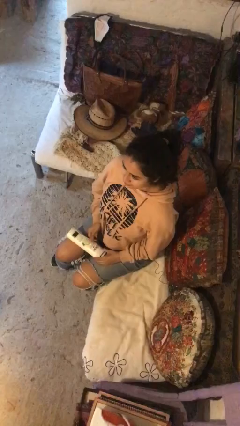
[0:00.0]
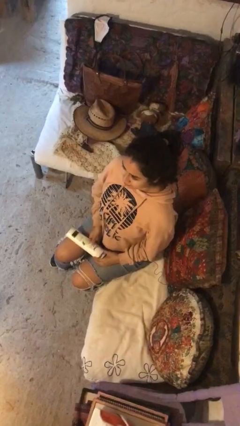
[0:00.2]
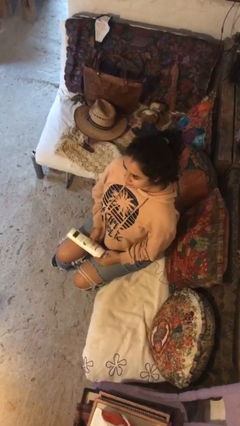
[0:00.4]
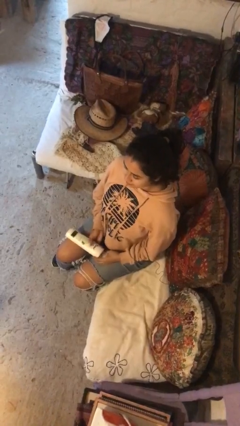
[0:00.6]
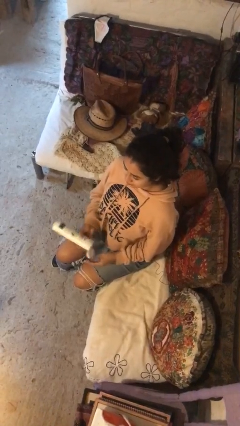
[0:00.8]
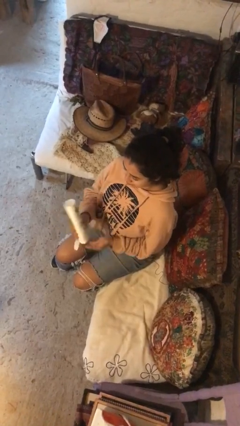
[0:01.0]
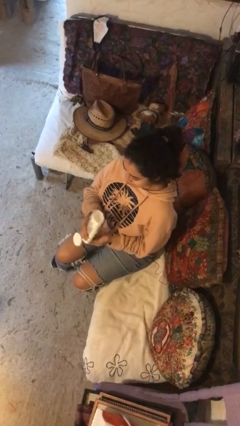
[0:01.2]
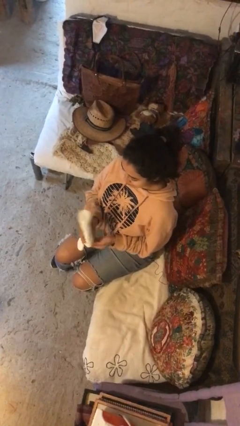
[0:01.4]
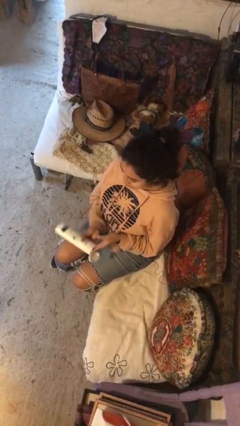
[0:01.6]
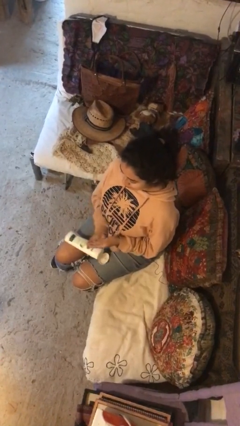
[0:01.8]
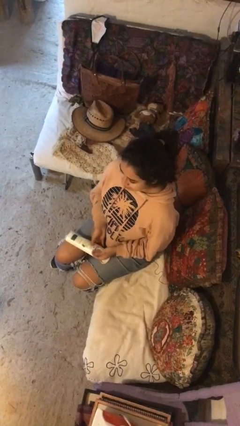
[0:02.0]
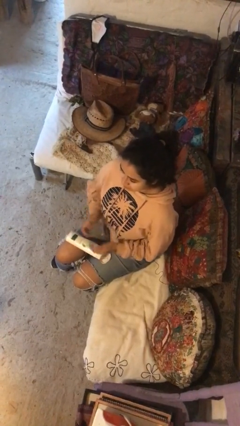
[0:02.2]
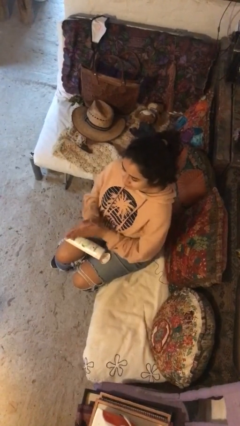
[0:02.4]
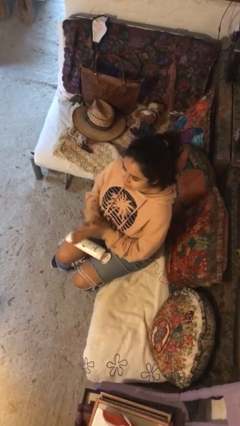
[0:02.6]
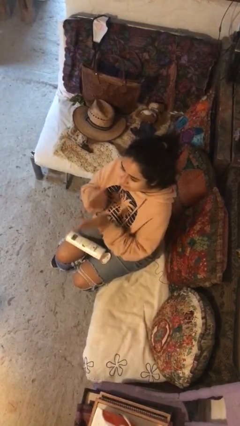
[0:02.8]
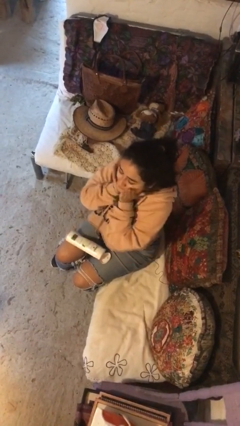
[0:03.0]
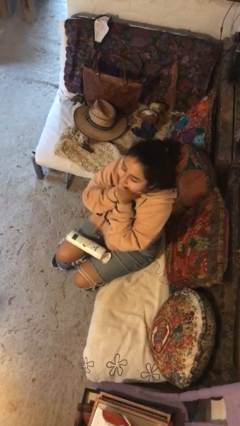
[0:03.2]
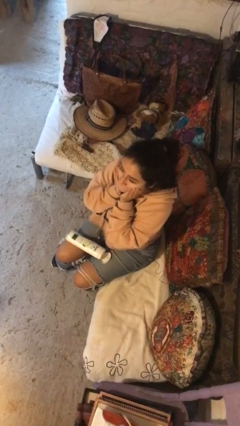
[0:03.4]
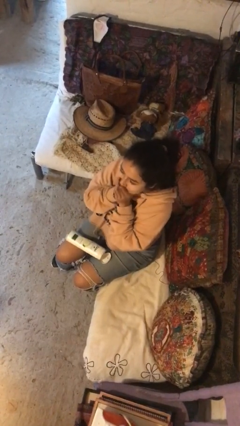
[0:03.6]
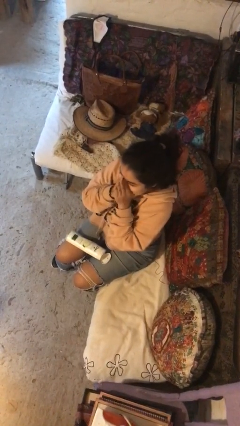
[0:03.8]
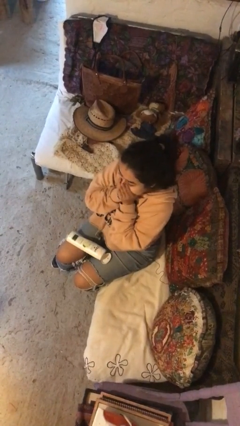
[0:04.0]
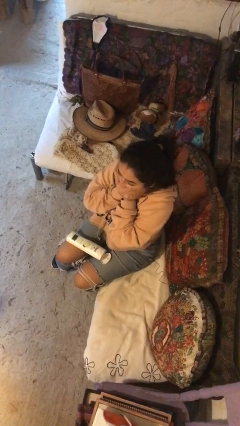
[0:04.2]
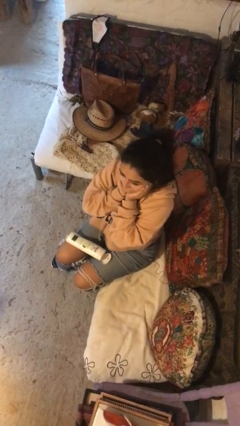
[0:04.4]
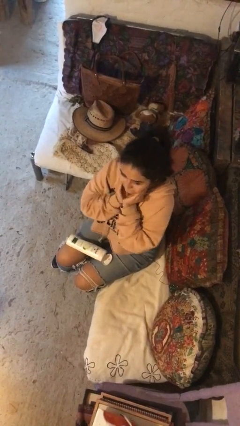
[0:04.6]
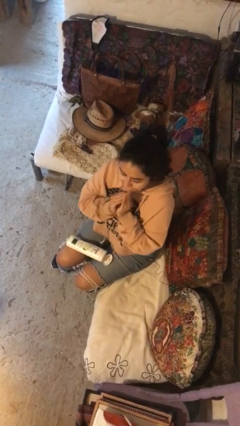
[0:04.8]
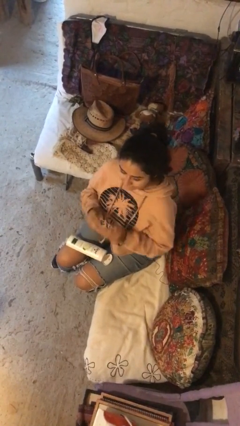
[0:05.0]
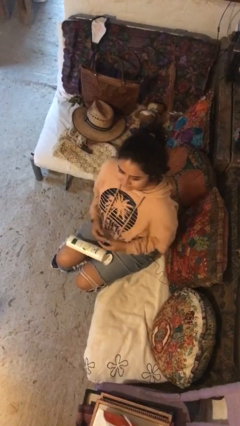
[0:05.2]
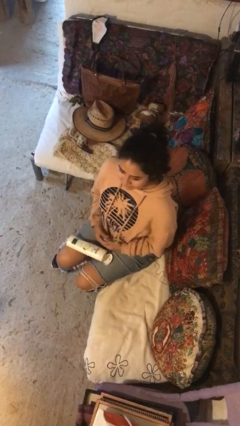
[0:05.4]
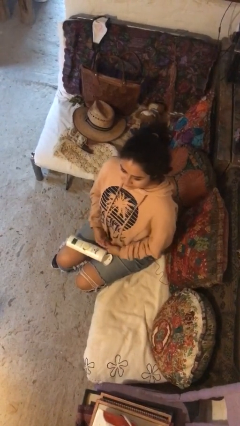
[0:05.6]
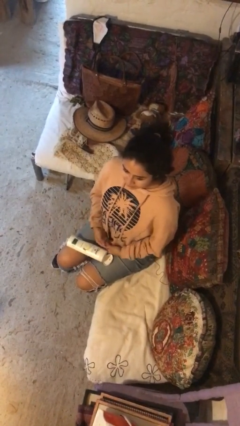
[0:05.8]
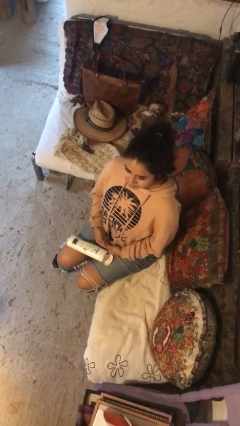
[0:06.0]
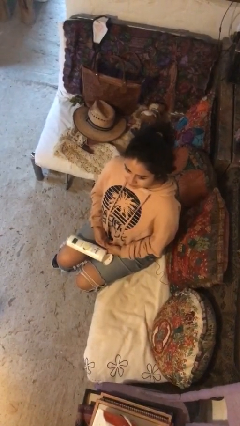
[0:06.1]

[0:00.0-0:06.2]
person applies facial moisturizer

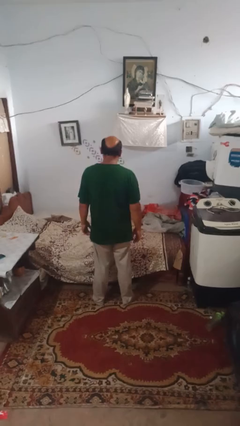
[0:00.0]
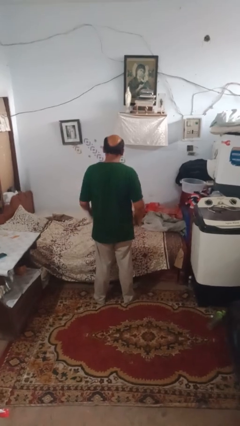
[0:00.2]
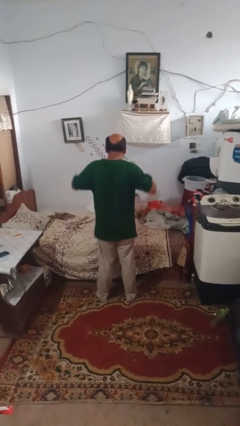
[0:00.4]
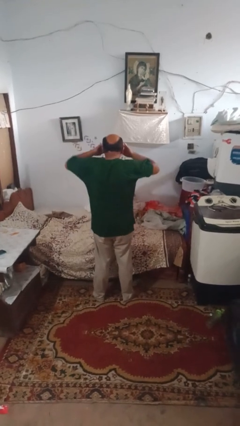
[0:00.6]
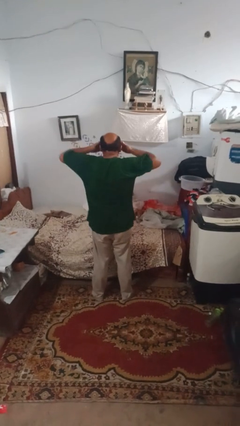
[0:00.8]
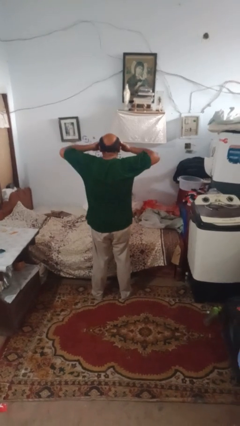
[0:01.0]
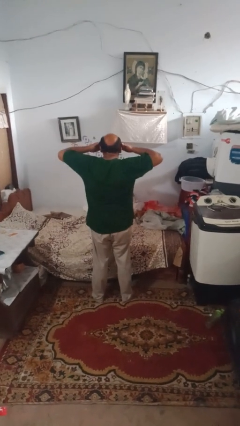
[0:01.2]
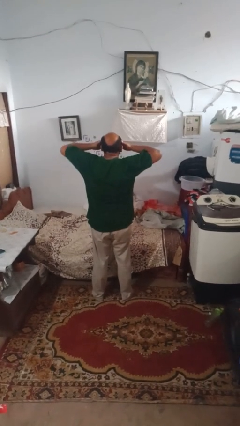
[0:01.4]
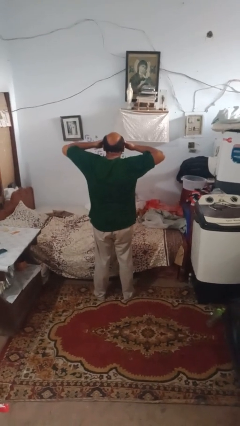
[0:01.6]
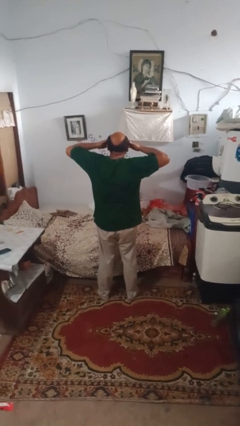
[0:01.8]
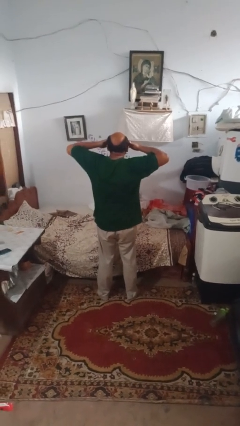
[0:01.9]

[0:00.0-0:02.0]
person rubs eyes

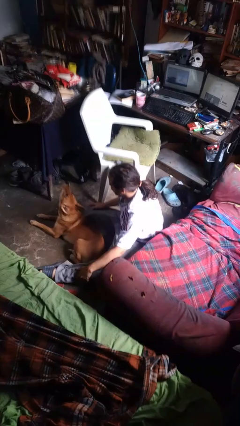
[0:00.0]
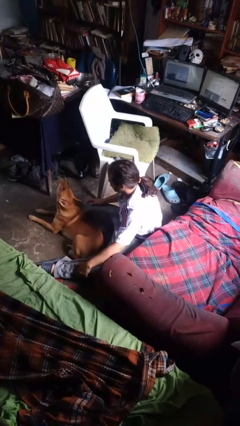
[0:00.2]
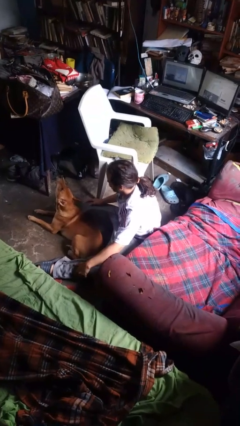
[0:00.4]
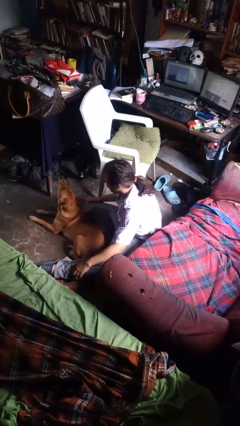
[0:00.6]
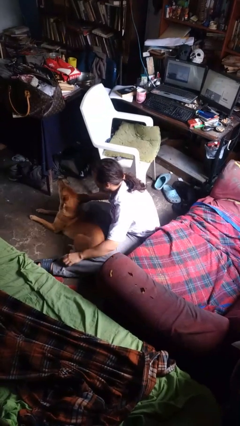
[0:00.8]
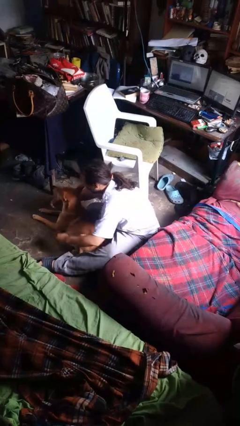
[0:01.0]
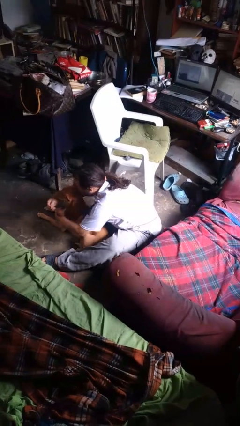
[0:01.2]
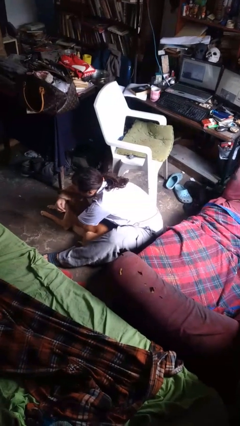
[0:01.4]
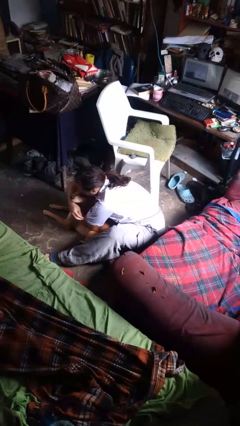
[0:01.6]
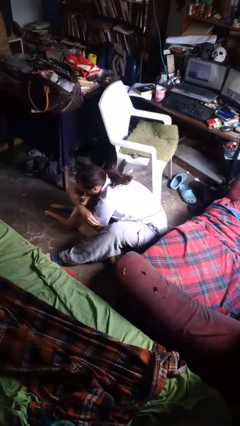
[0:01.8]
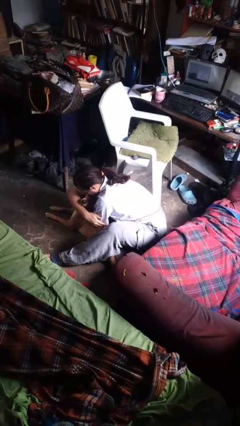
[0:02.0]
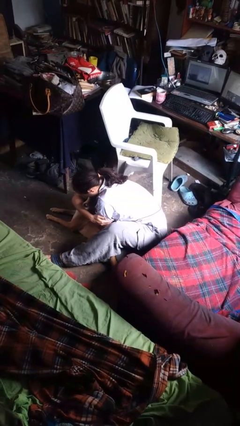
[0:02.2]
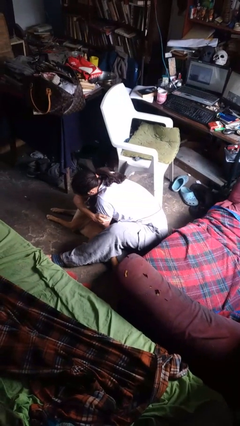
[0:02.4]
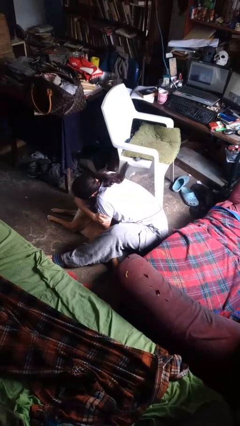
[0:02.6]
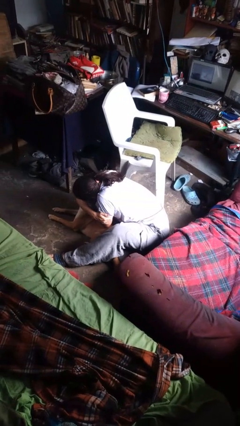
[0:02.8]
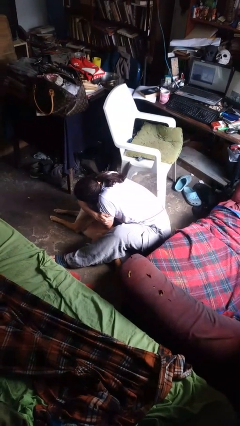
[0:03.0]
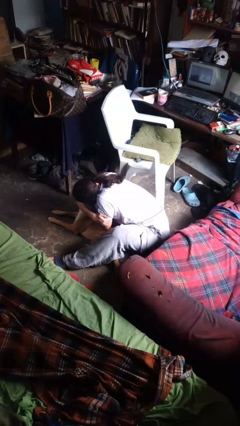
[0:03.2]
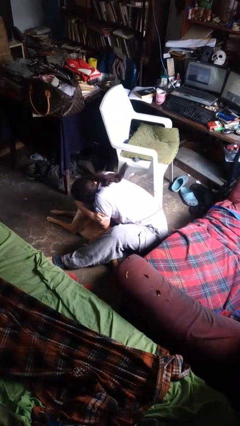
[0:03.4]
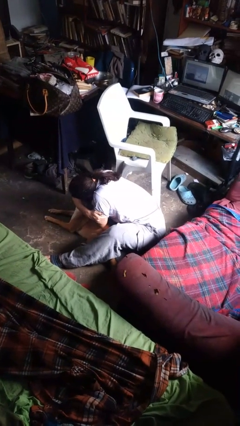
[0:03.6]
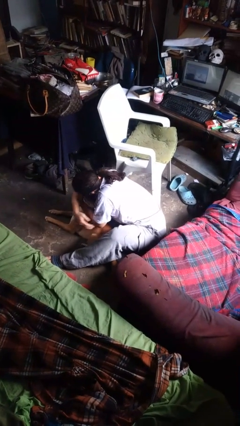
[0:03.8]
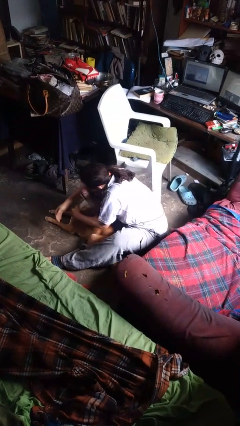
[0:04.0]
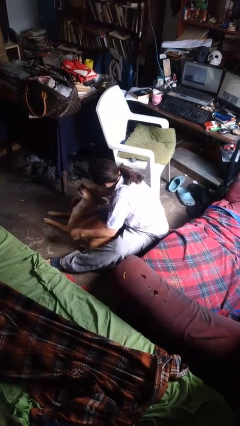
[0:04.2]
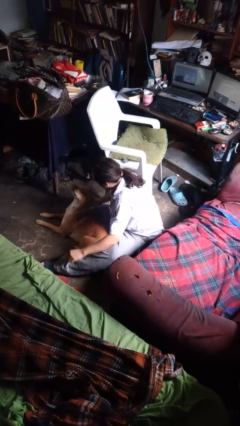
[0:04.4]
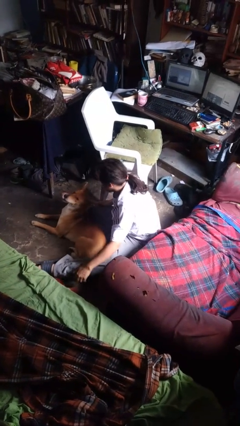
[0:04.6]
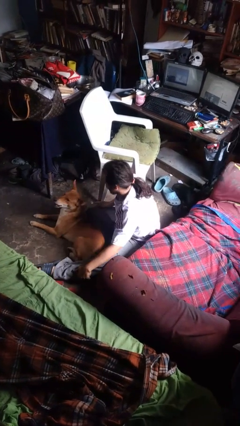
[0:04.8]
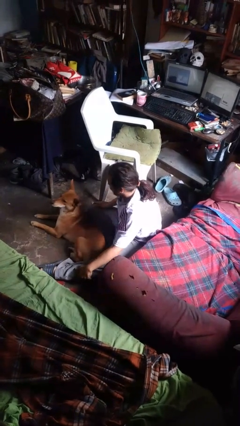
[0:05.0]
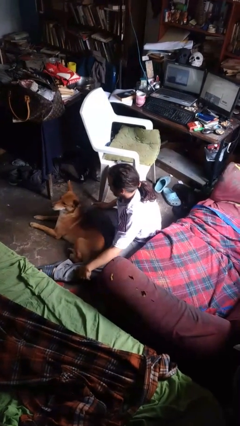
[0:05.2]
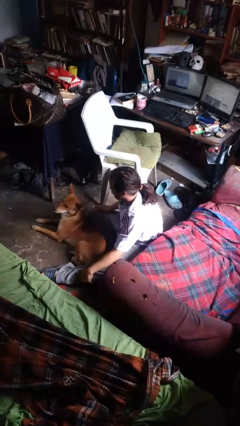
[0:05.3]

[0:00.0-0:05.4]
person hugs dog

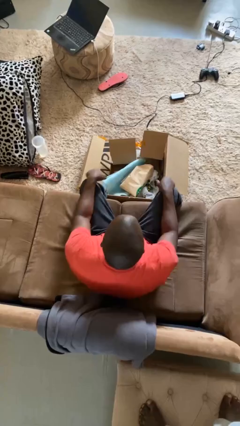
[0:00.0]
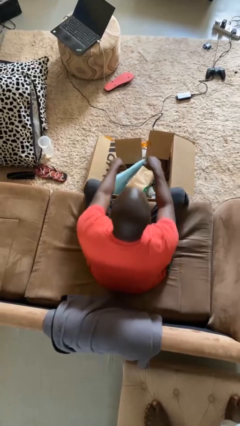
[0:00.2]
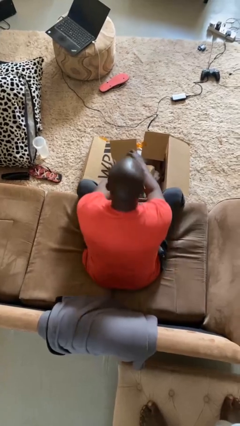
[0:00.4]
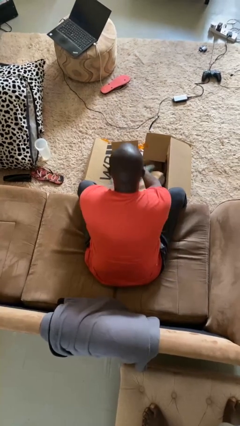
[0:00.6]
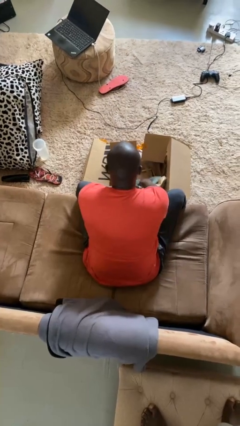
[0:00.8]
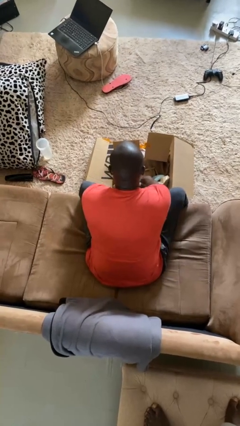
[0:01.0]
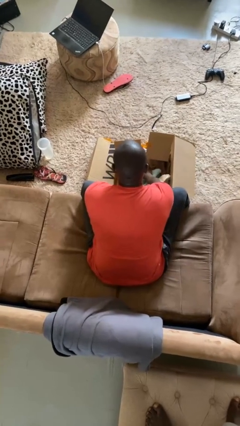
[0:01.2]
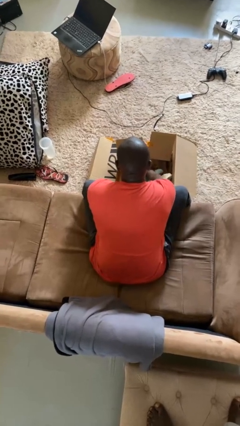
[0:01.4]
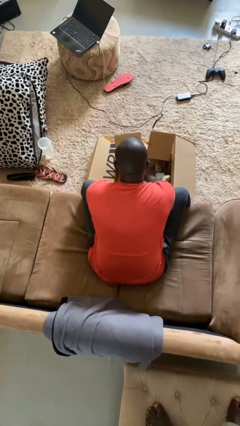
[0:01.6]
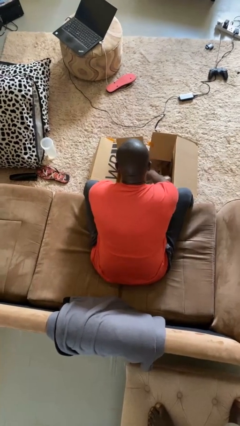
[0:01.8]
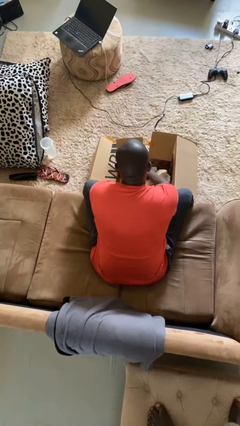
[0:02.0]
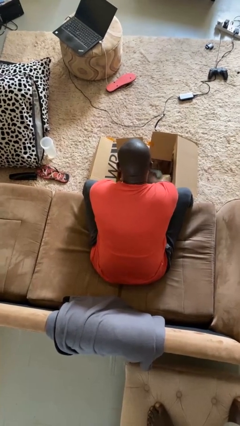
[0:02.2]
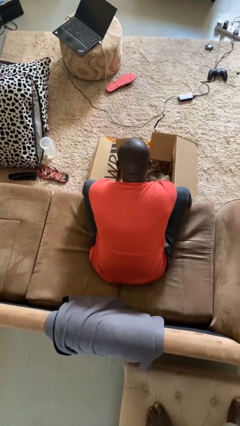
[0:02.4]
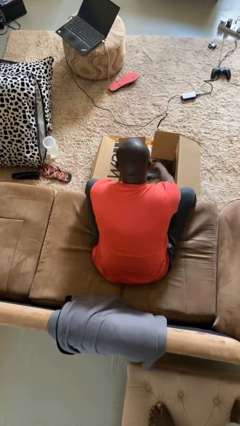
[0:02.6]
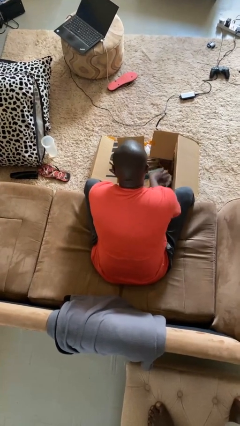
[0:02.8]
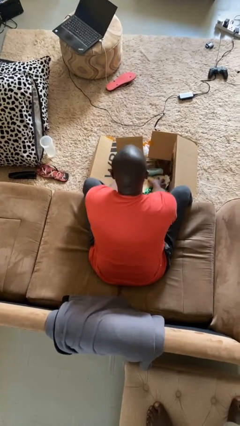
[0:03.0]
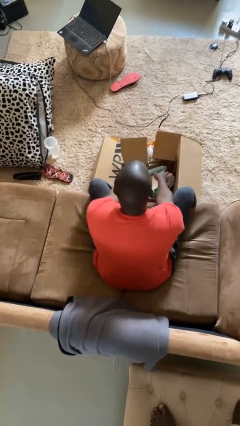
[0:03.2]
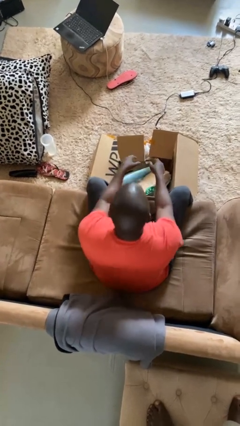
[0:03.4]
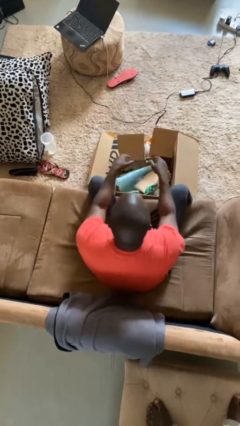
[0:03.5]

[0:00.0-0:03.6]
person searches in box

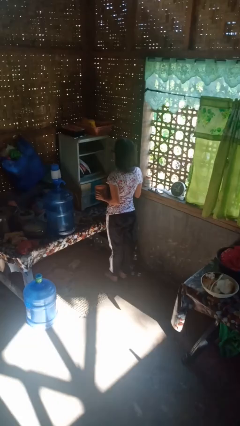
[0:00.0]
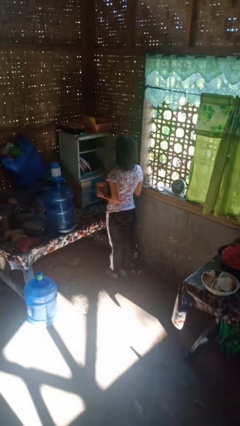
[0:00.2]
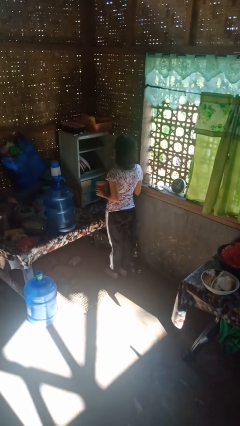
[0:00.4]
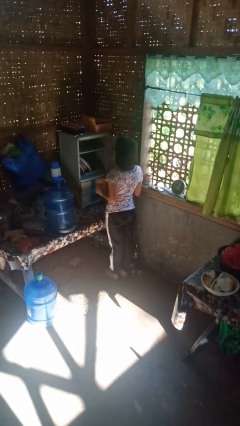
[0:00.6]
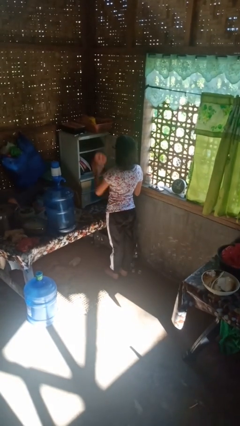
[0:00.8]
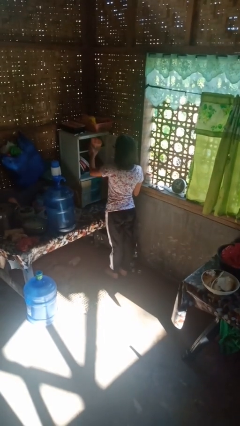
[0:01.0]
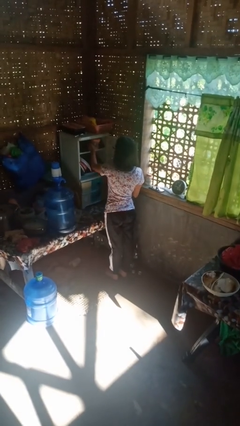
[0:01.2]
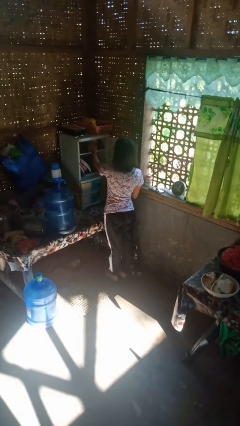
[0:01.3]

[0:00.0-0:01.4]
person puts down object into cabinet
